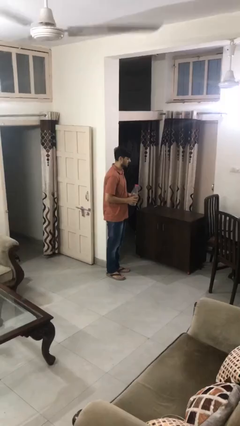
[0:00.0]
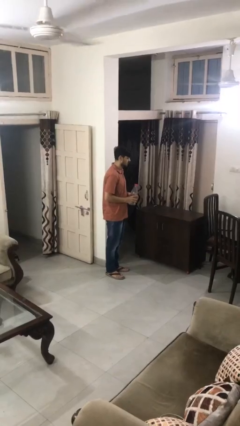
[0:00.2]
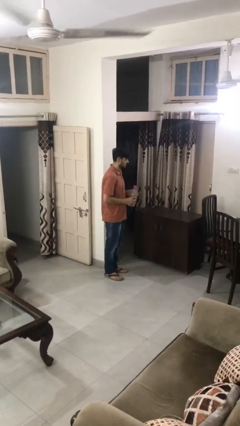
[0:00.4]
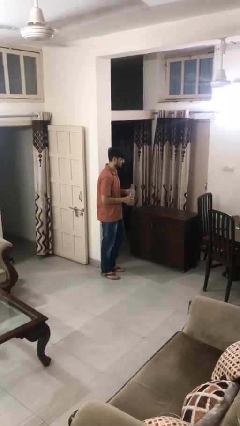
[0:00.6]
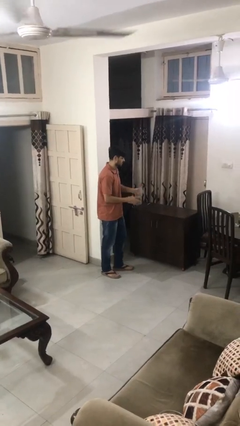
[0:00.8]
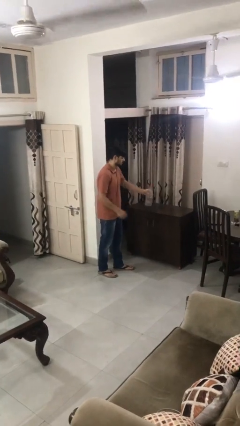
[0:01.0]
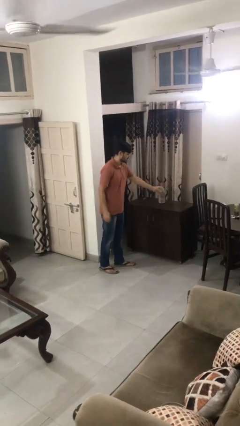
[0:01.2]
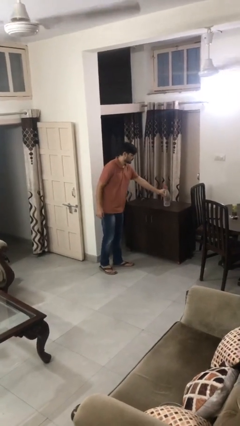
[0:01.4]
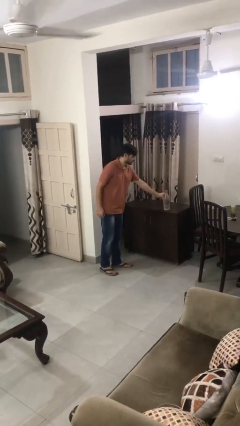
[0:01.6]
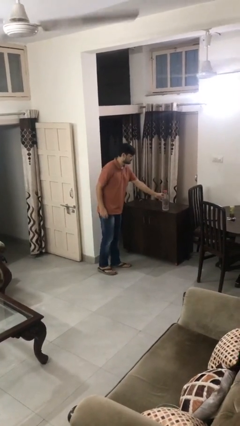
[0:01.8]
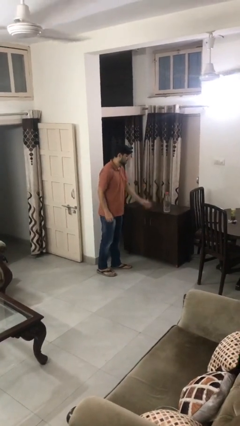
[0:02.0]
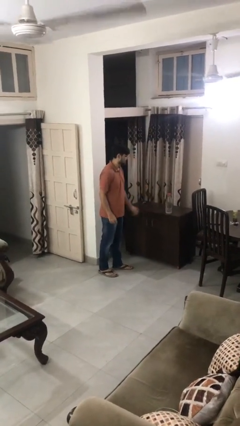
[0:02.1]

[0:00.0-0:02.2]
person puts down object on countertop

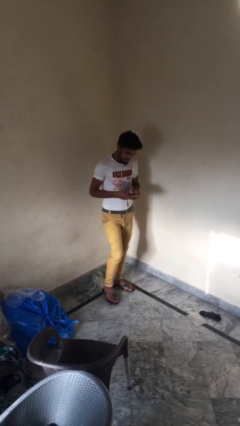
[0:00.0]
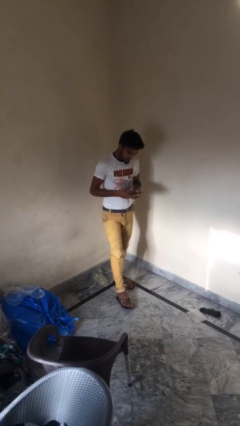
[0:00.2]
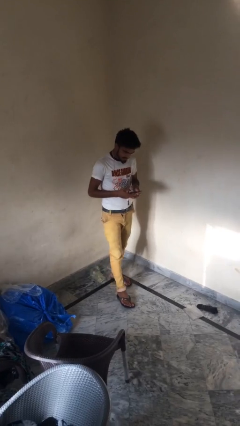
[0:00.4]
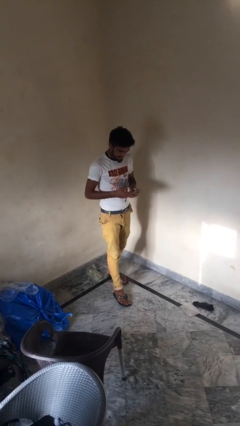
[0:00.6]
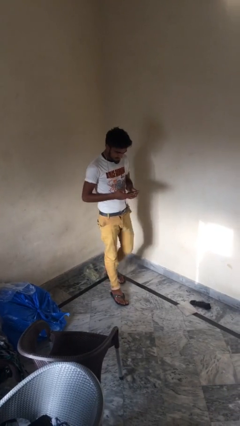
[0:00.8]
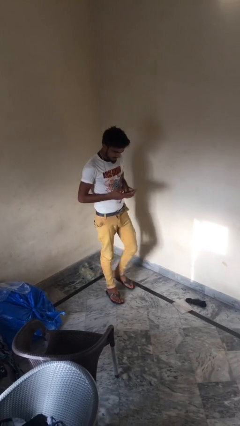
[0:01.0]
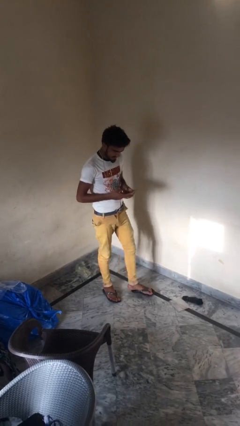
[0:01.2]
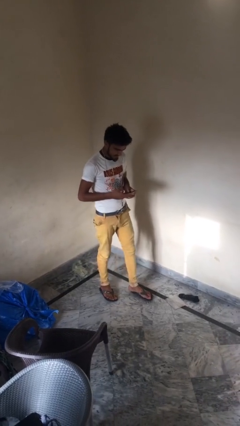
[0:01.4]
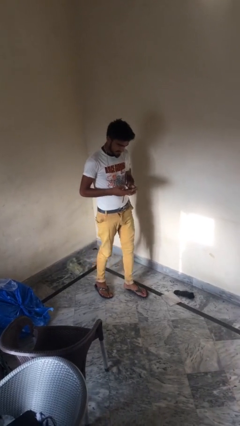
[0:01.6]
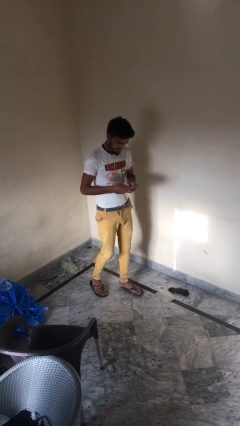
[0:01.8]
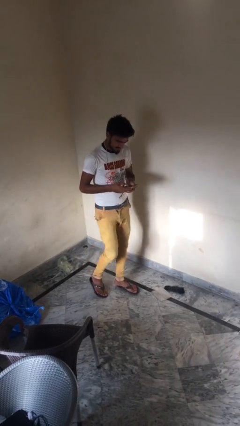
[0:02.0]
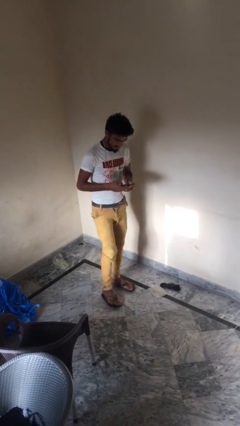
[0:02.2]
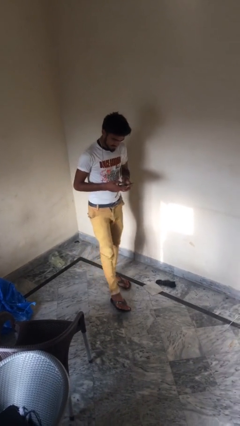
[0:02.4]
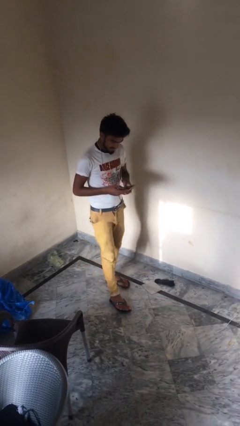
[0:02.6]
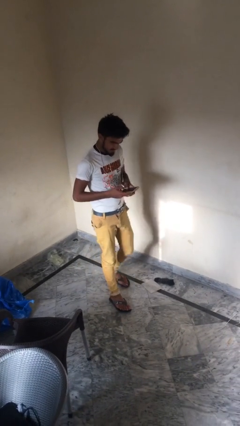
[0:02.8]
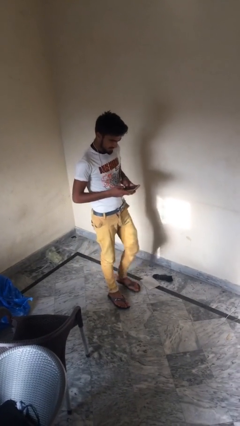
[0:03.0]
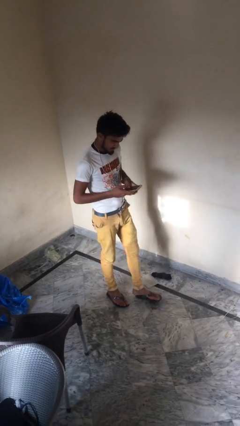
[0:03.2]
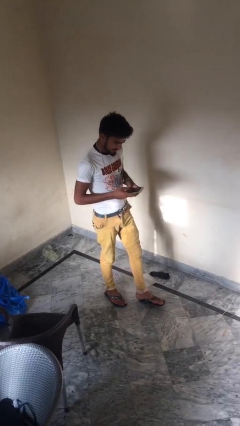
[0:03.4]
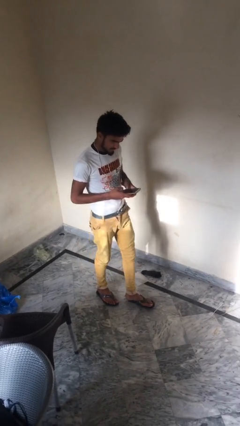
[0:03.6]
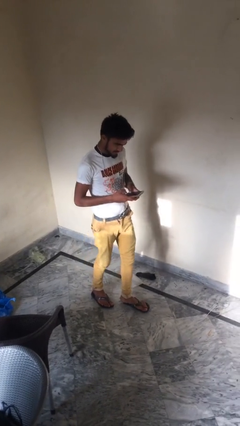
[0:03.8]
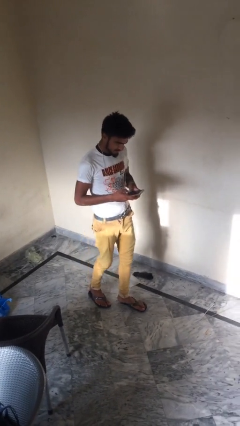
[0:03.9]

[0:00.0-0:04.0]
person texts on phone

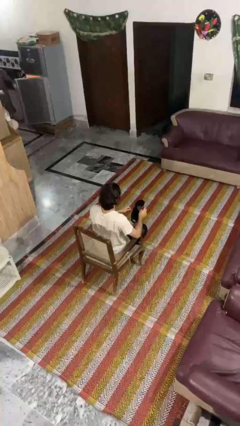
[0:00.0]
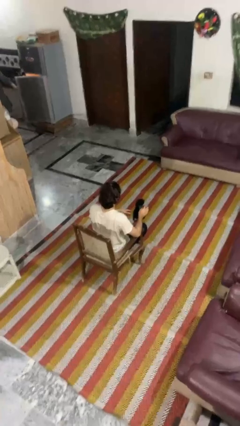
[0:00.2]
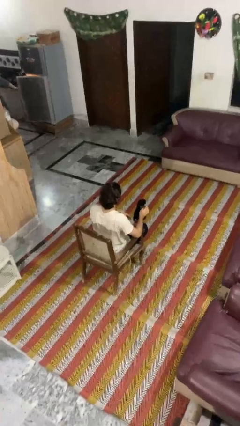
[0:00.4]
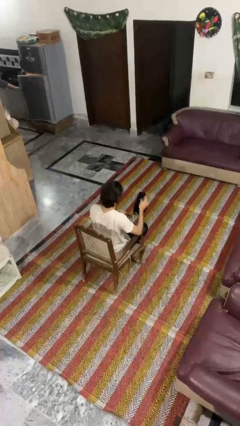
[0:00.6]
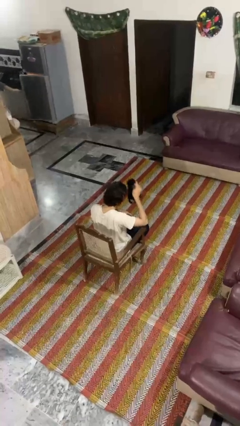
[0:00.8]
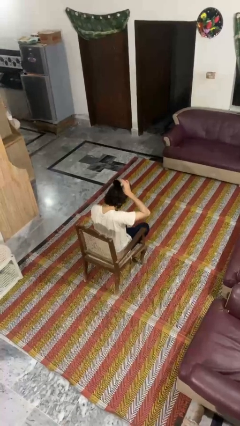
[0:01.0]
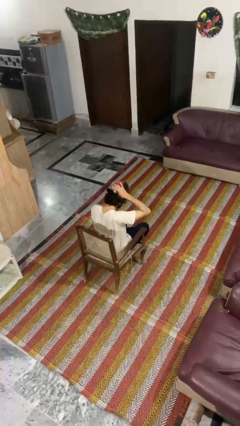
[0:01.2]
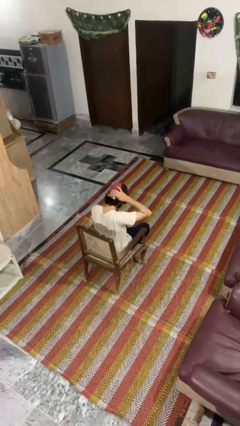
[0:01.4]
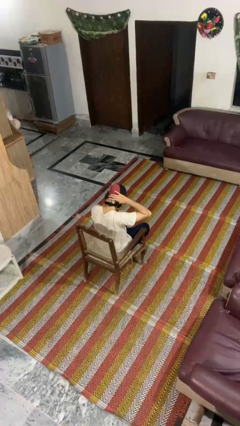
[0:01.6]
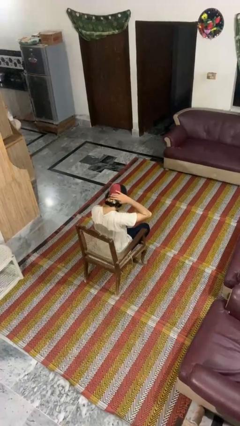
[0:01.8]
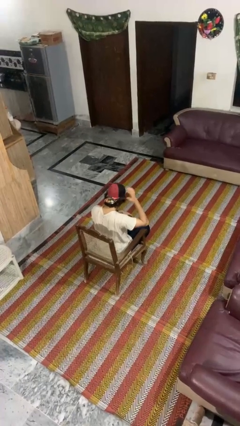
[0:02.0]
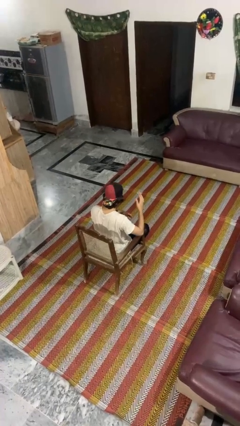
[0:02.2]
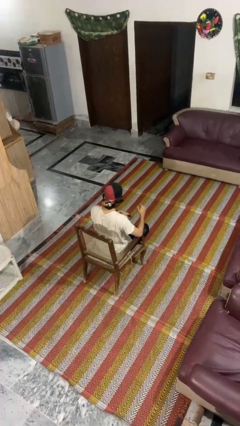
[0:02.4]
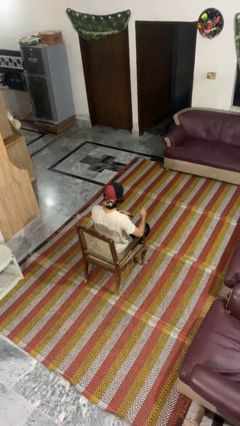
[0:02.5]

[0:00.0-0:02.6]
person puts on hat

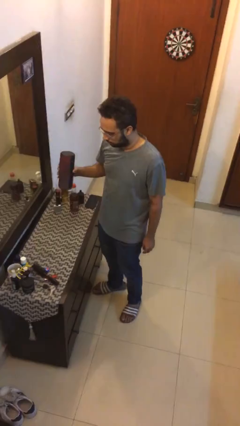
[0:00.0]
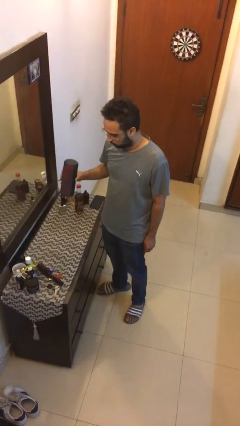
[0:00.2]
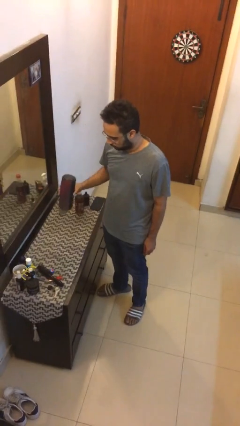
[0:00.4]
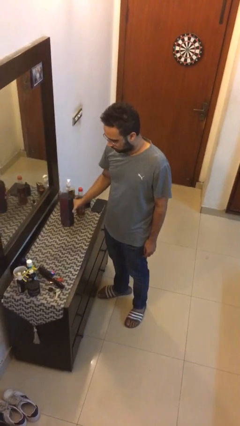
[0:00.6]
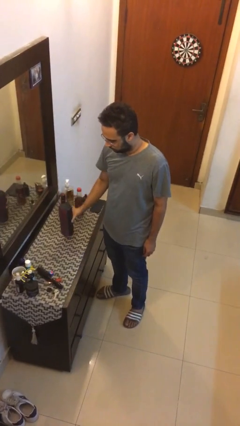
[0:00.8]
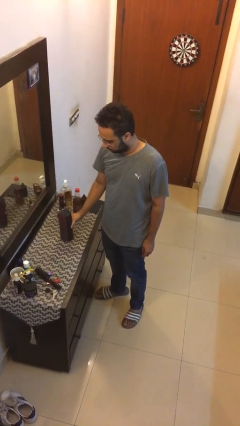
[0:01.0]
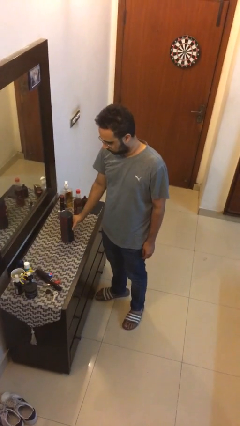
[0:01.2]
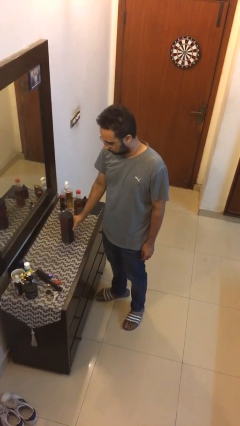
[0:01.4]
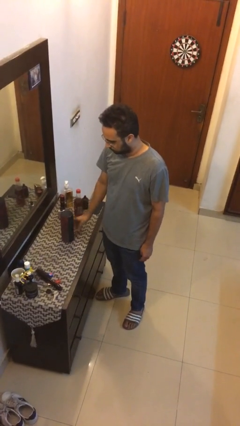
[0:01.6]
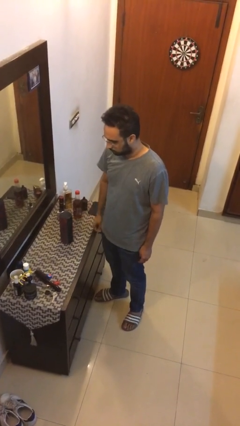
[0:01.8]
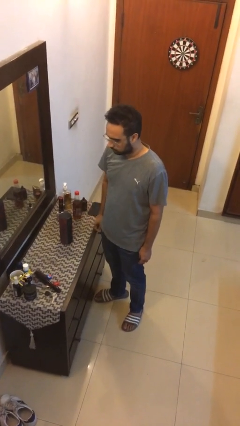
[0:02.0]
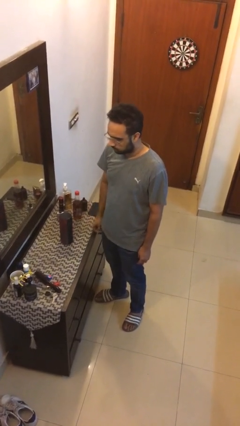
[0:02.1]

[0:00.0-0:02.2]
person puts down object on table

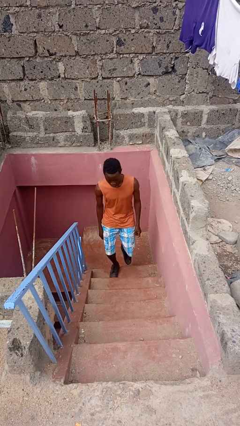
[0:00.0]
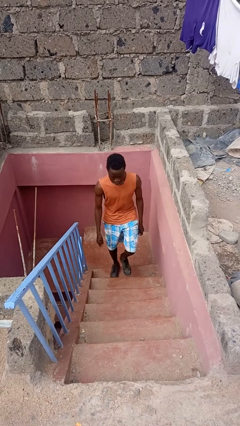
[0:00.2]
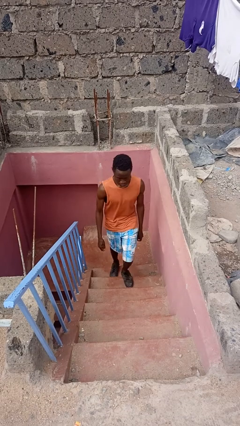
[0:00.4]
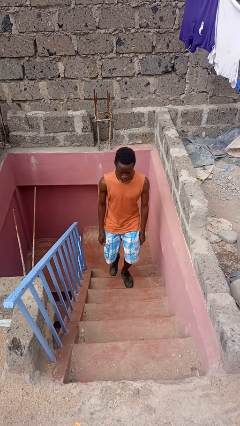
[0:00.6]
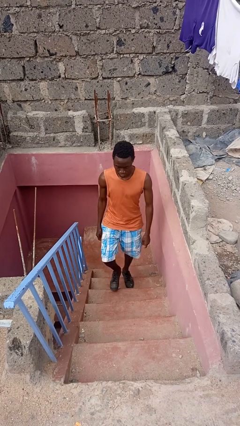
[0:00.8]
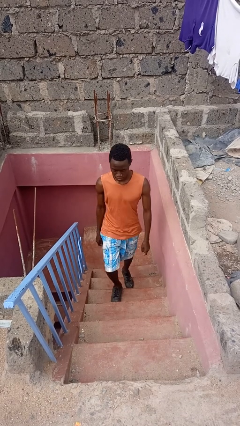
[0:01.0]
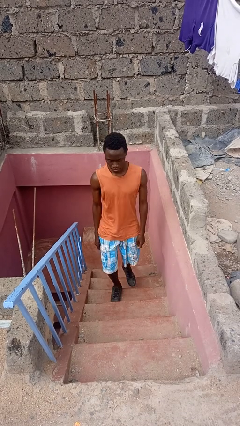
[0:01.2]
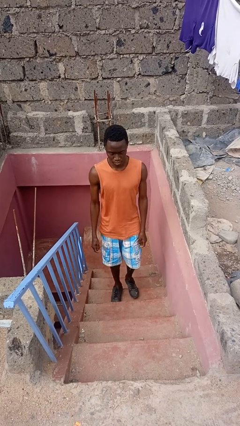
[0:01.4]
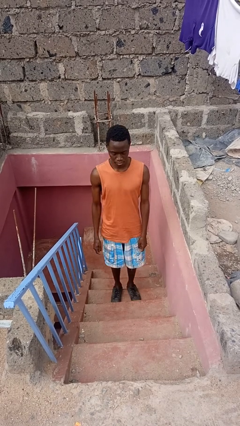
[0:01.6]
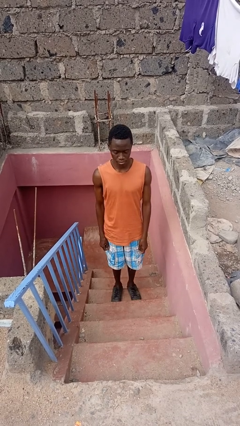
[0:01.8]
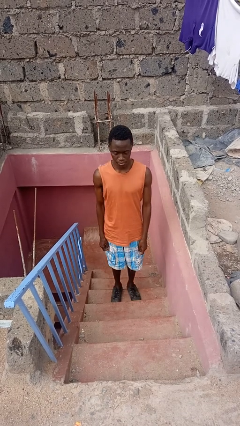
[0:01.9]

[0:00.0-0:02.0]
person climbs up stairs

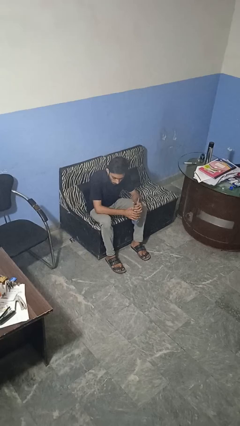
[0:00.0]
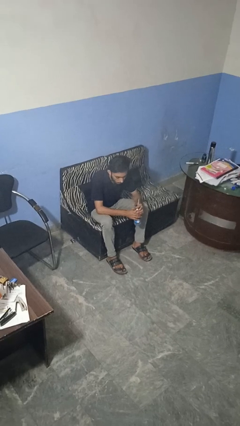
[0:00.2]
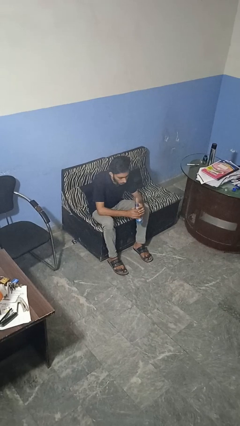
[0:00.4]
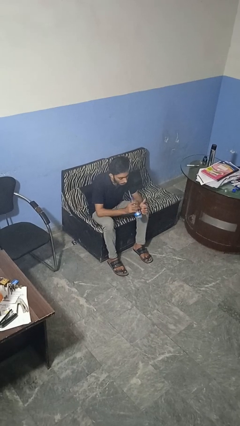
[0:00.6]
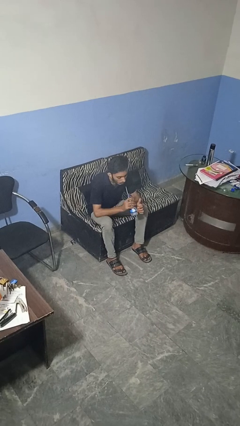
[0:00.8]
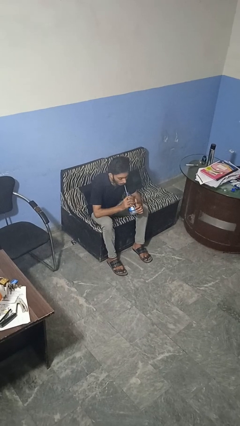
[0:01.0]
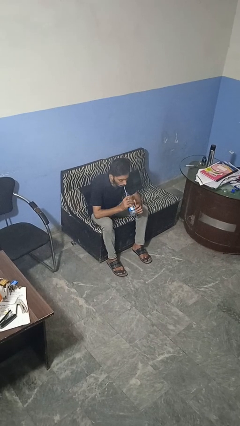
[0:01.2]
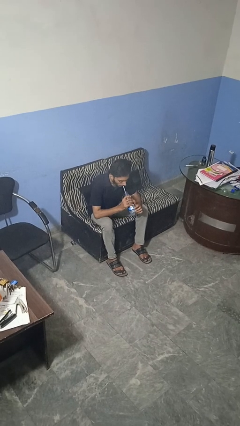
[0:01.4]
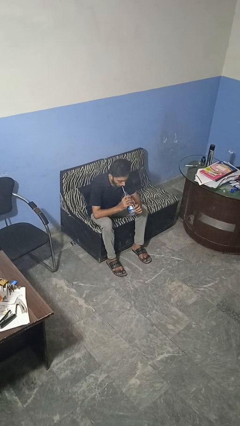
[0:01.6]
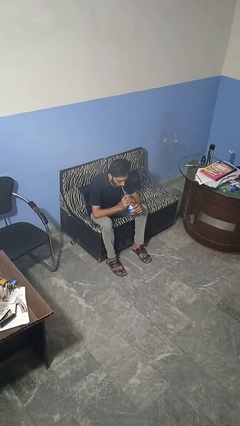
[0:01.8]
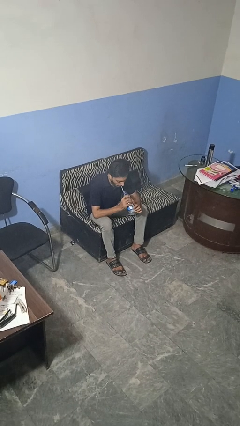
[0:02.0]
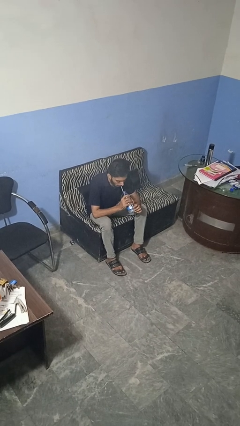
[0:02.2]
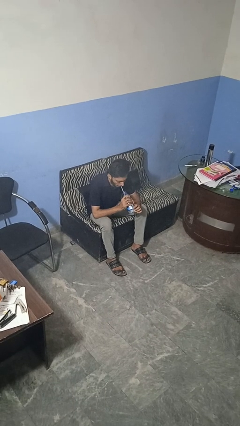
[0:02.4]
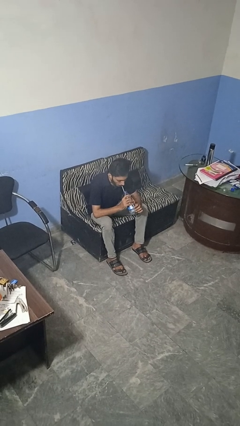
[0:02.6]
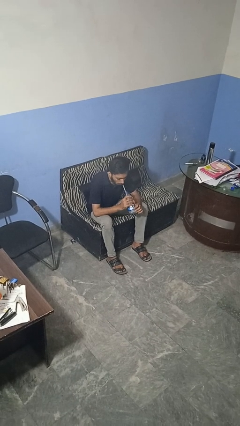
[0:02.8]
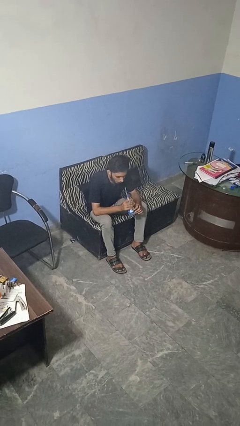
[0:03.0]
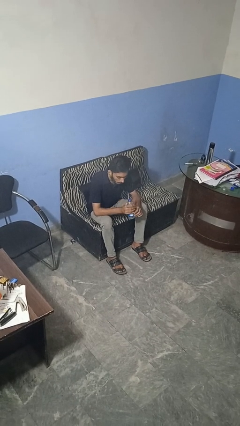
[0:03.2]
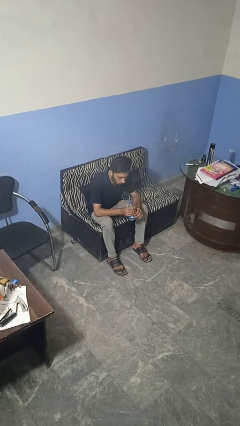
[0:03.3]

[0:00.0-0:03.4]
person drinks from straw

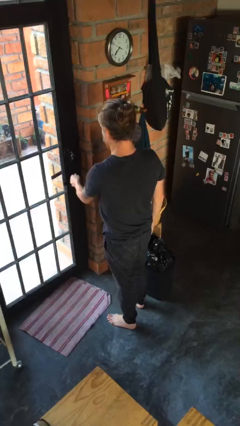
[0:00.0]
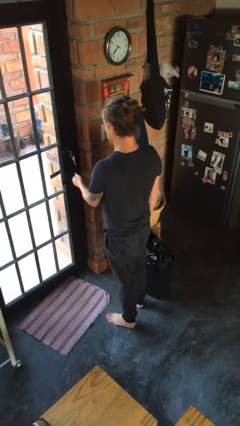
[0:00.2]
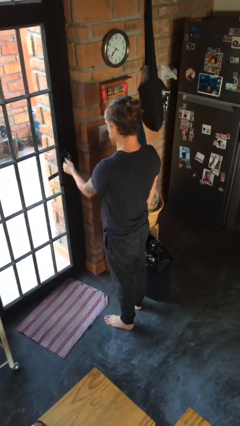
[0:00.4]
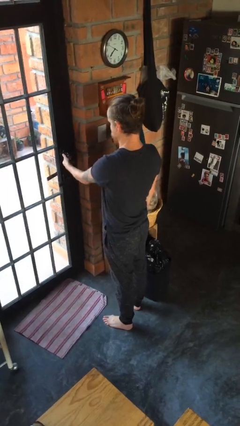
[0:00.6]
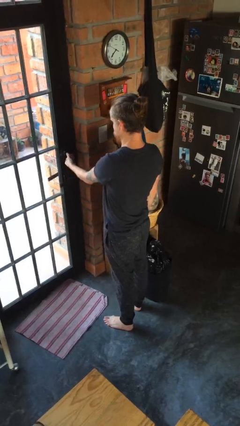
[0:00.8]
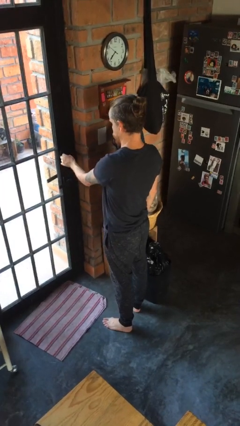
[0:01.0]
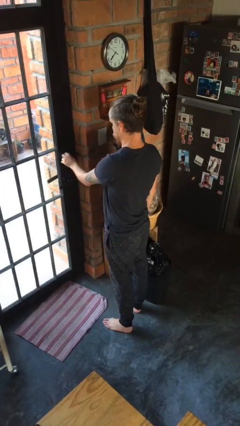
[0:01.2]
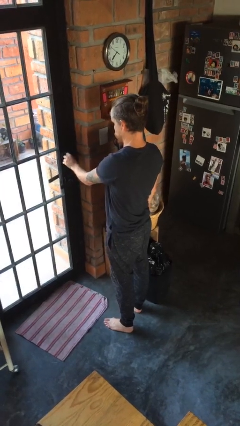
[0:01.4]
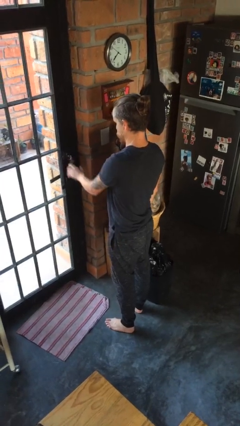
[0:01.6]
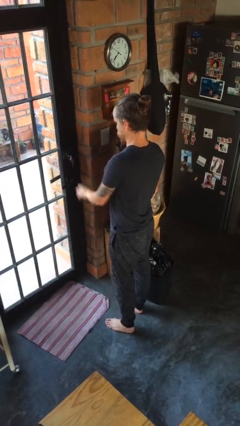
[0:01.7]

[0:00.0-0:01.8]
person locks door with keys
